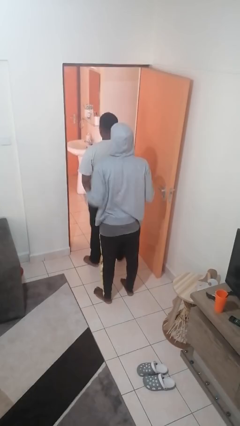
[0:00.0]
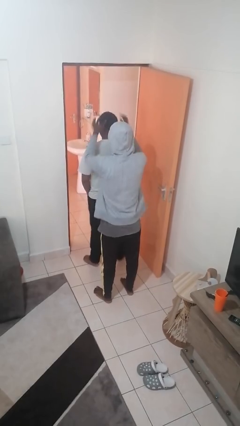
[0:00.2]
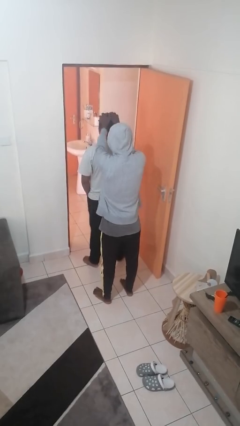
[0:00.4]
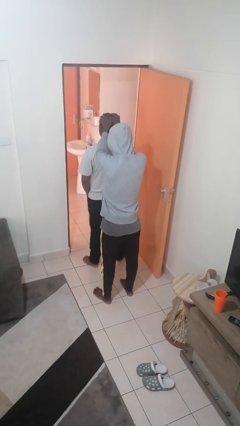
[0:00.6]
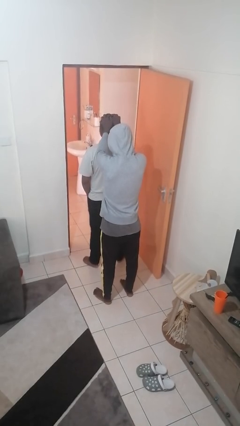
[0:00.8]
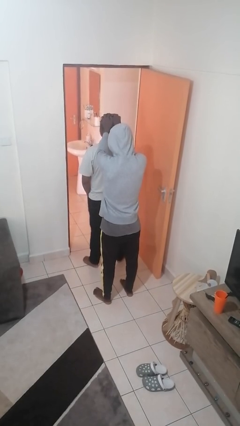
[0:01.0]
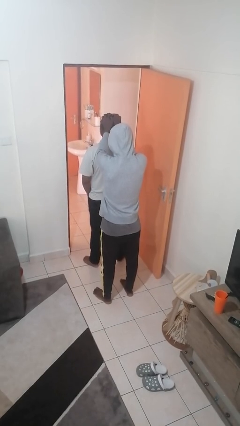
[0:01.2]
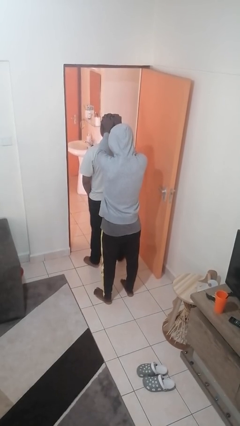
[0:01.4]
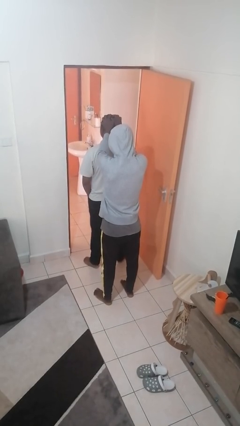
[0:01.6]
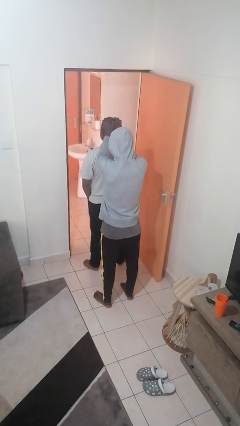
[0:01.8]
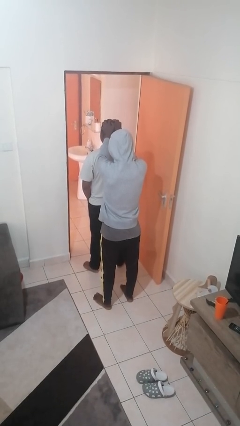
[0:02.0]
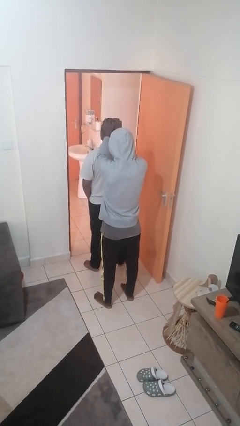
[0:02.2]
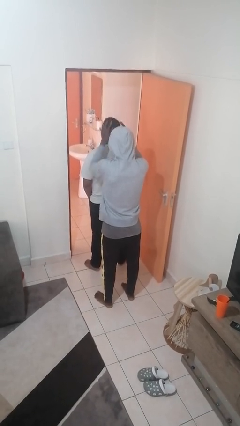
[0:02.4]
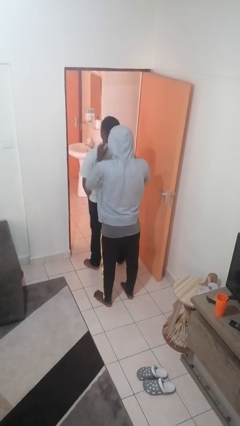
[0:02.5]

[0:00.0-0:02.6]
person grabs person by hair

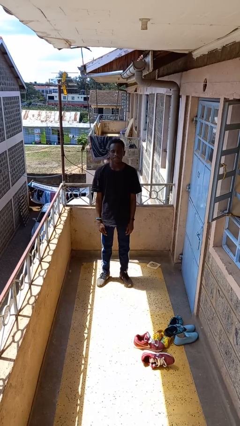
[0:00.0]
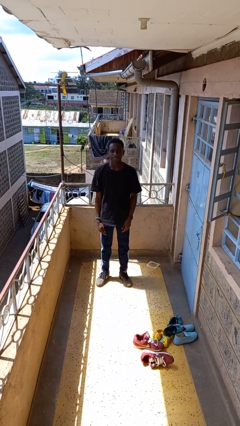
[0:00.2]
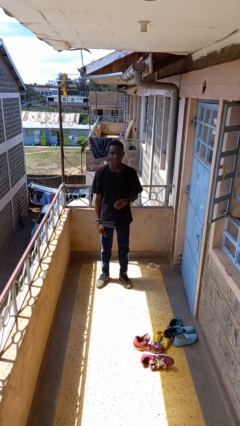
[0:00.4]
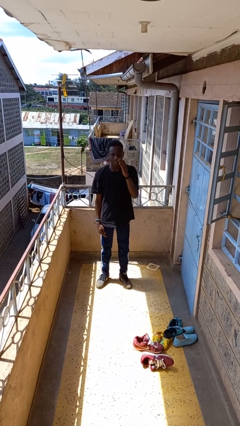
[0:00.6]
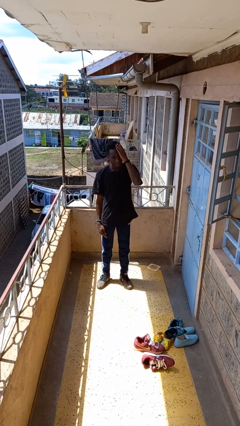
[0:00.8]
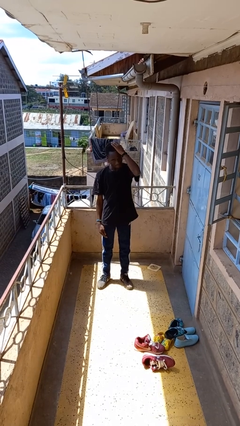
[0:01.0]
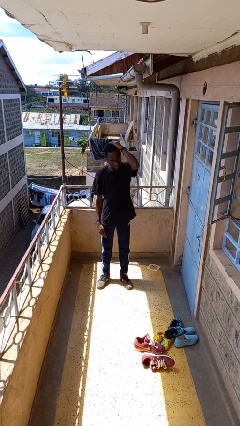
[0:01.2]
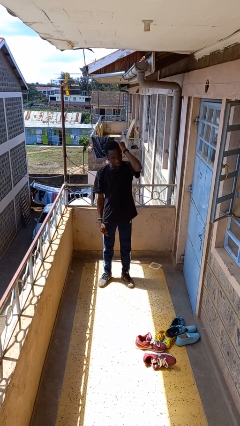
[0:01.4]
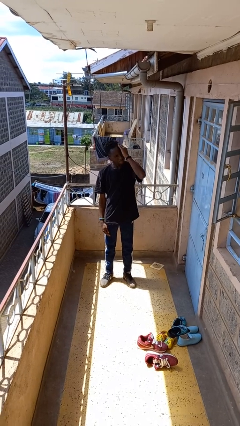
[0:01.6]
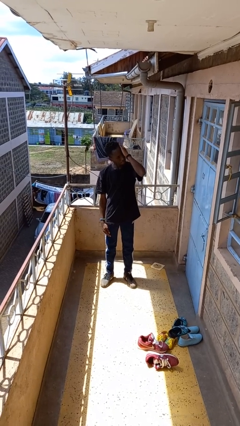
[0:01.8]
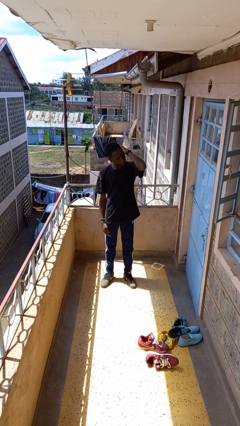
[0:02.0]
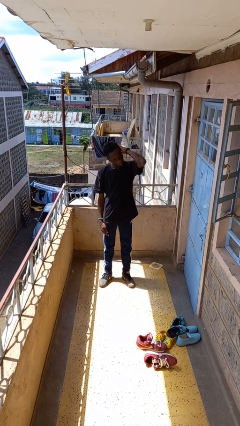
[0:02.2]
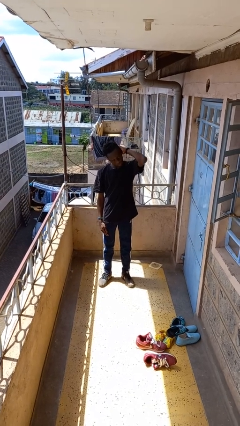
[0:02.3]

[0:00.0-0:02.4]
person strokes hair

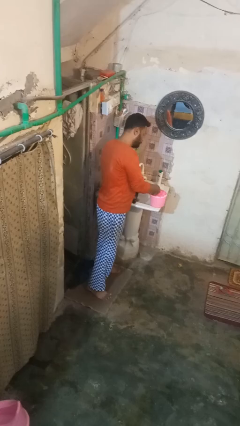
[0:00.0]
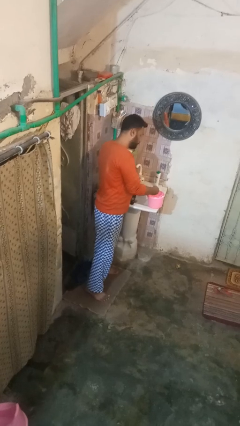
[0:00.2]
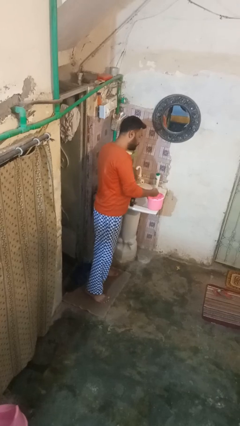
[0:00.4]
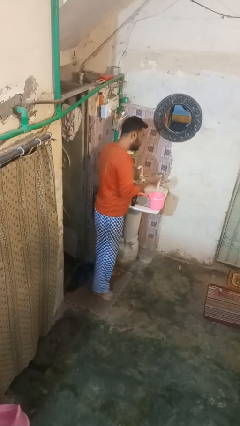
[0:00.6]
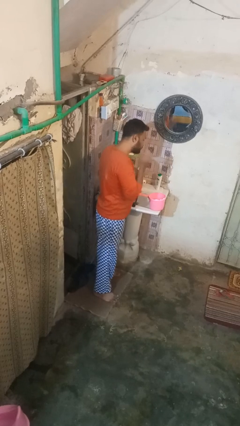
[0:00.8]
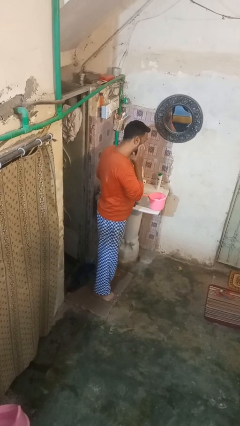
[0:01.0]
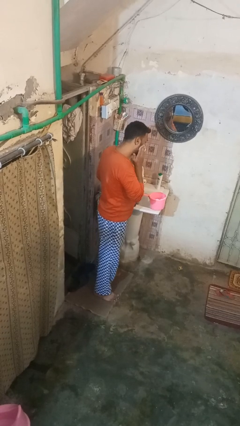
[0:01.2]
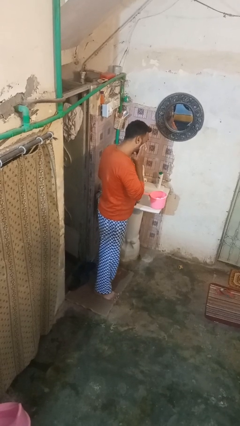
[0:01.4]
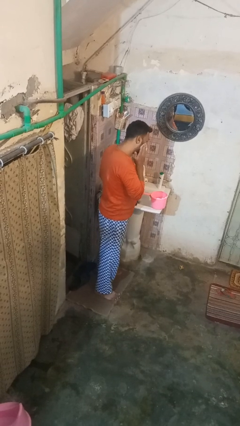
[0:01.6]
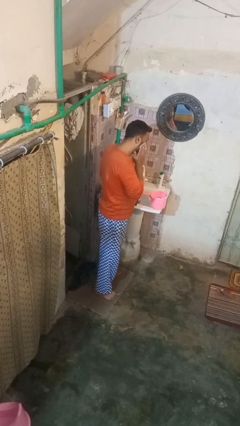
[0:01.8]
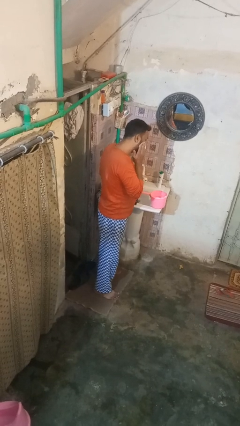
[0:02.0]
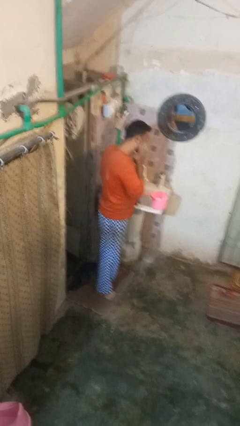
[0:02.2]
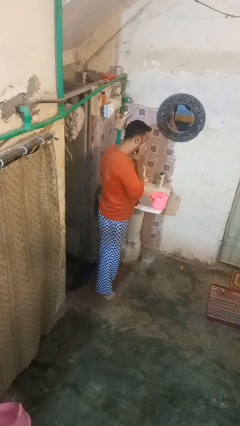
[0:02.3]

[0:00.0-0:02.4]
person applies shaving cream

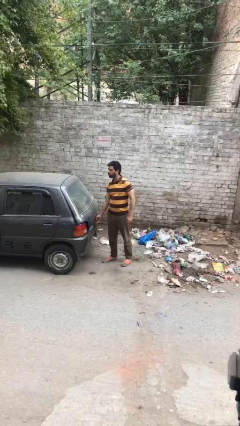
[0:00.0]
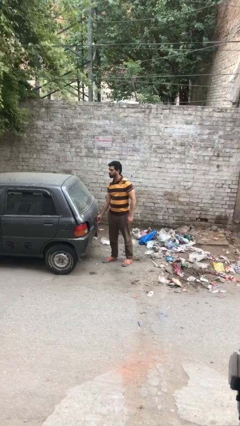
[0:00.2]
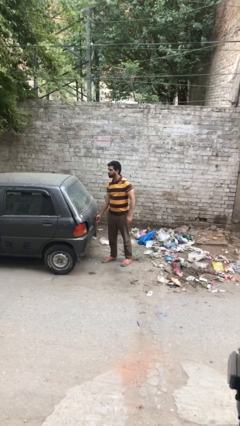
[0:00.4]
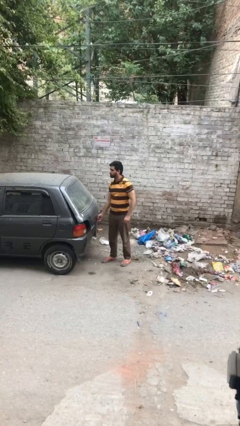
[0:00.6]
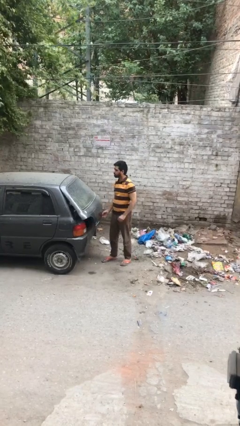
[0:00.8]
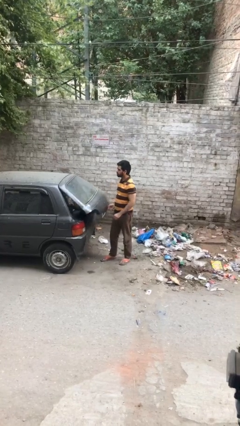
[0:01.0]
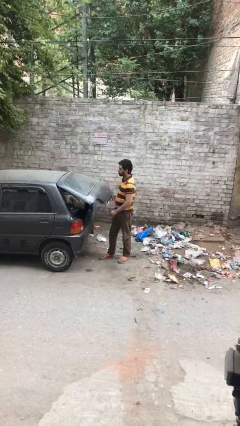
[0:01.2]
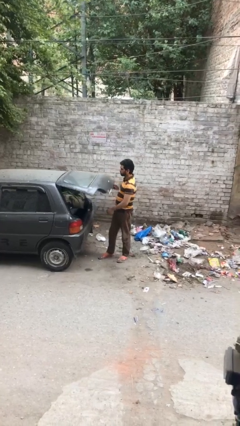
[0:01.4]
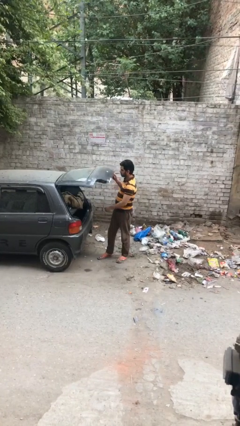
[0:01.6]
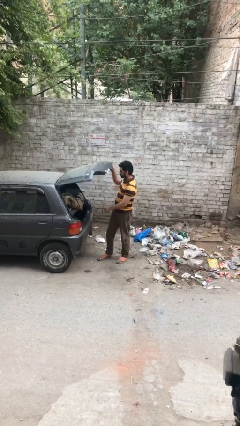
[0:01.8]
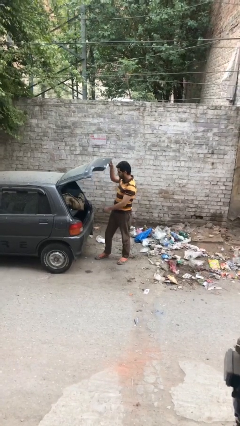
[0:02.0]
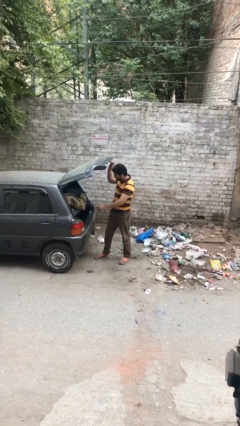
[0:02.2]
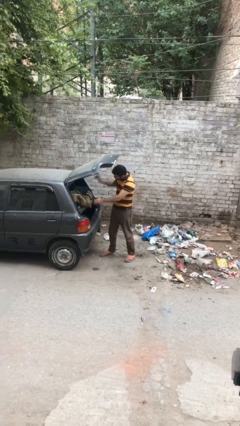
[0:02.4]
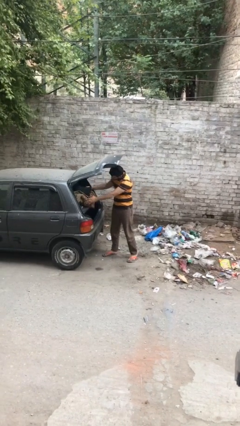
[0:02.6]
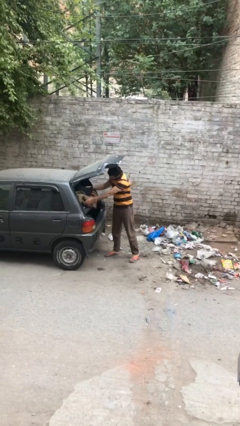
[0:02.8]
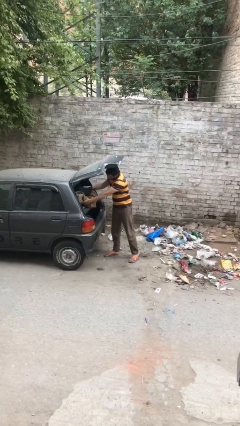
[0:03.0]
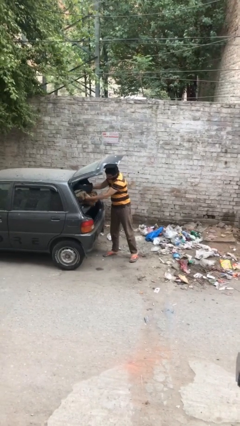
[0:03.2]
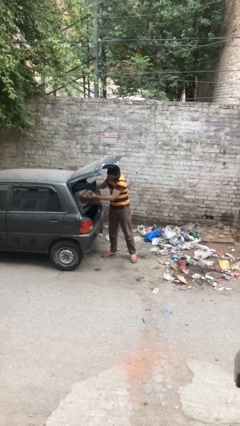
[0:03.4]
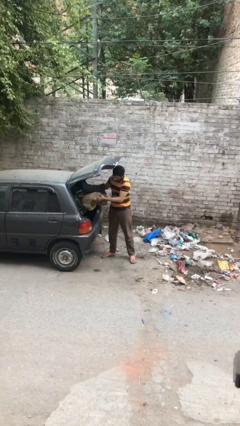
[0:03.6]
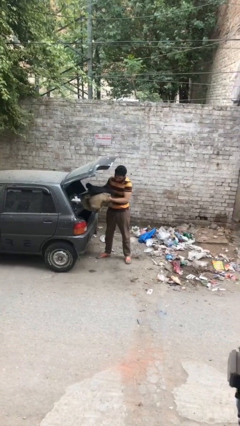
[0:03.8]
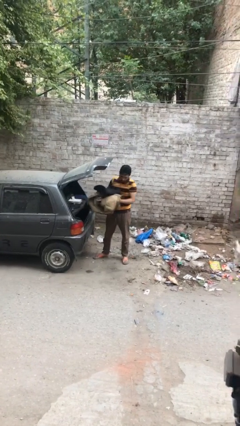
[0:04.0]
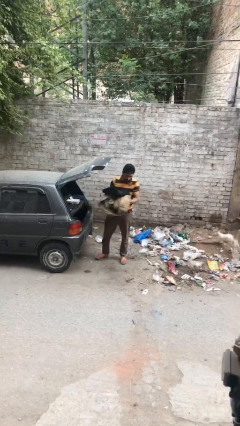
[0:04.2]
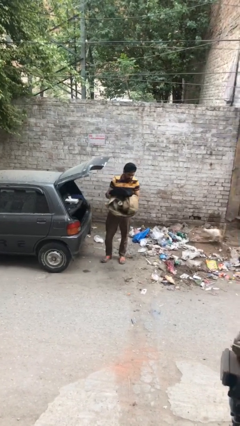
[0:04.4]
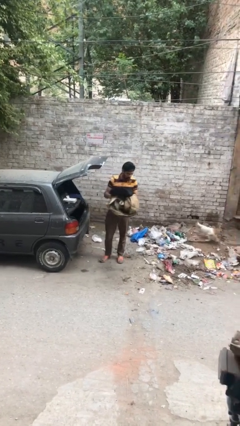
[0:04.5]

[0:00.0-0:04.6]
person unloads car

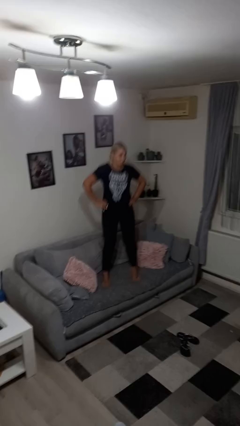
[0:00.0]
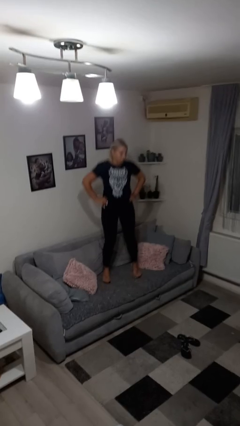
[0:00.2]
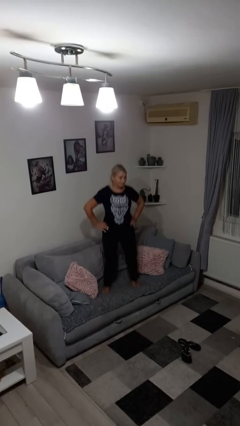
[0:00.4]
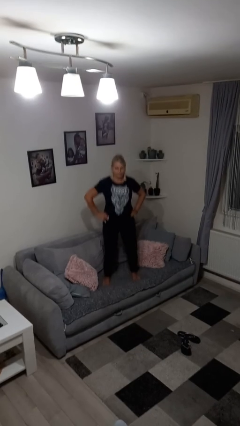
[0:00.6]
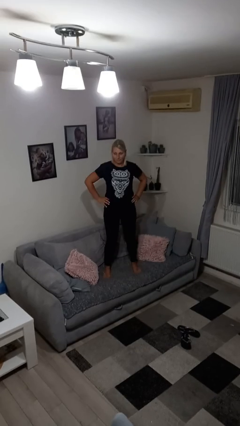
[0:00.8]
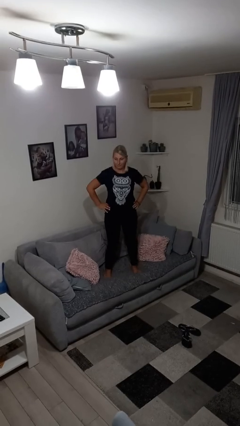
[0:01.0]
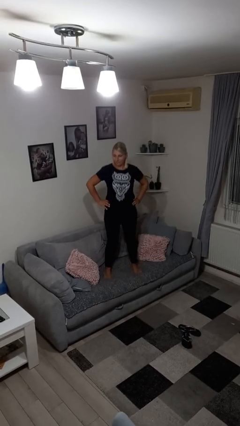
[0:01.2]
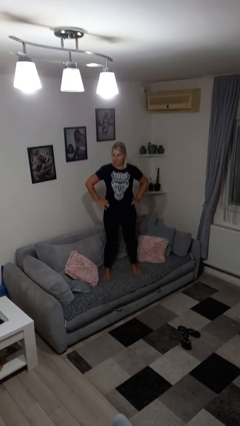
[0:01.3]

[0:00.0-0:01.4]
person jumps on couch

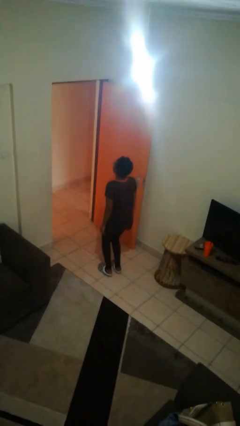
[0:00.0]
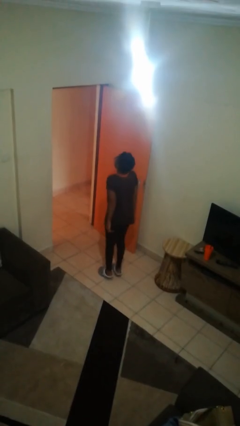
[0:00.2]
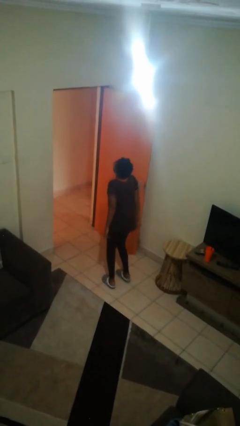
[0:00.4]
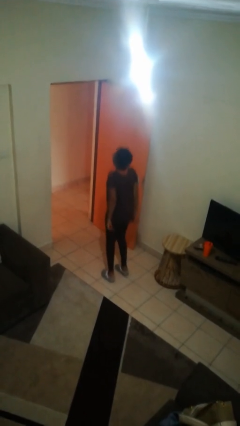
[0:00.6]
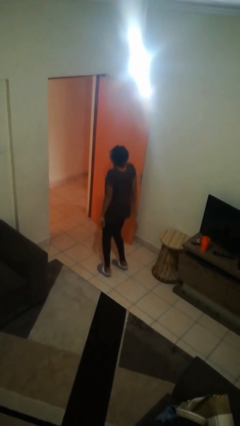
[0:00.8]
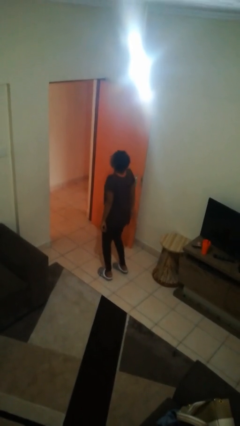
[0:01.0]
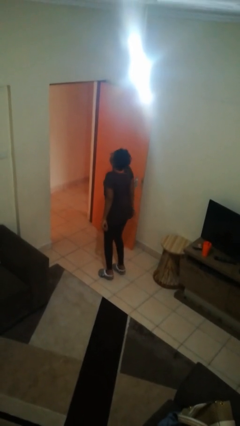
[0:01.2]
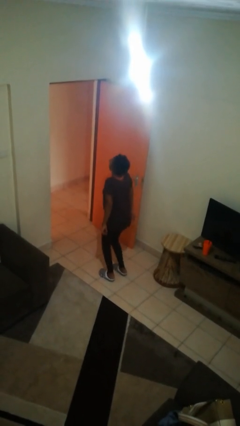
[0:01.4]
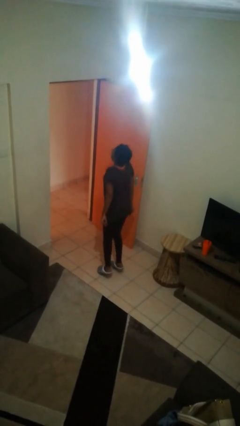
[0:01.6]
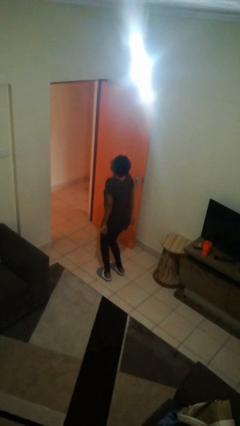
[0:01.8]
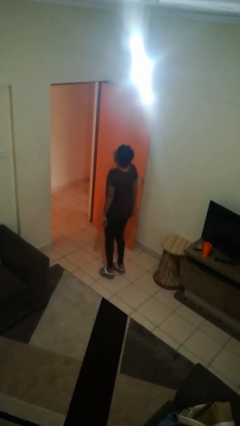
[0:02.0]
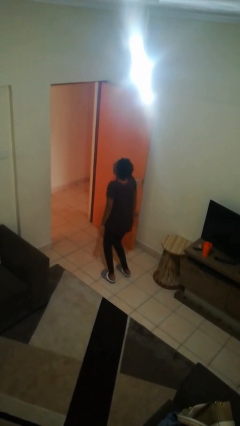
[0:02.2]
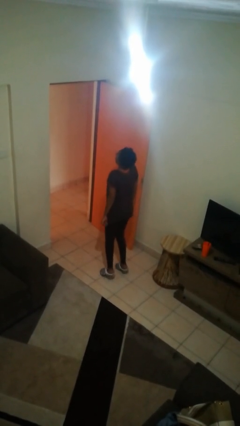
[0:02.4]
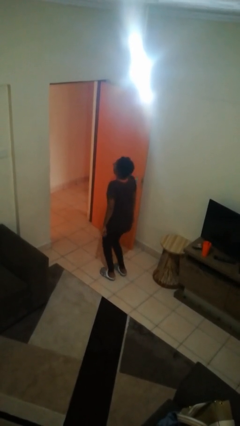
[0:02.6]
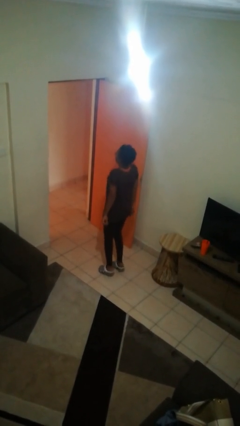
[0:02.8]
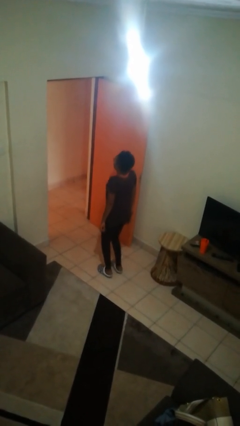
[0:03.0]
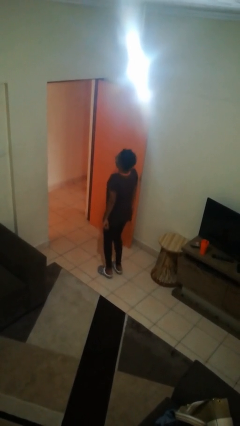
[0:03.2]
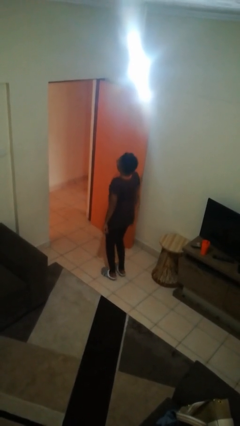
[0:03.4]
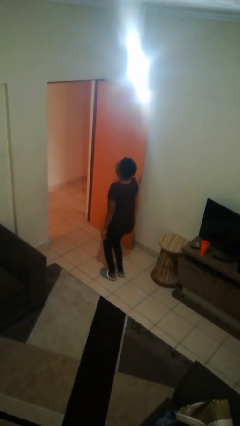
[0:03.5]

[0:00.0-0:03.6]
person jumps
